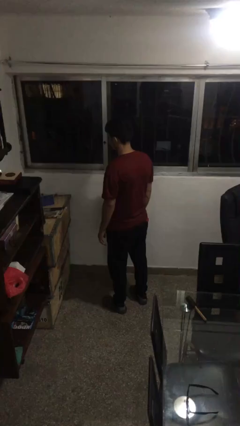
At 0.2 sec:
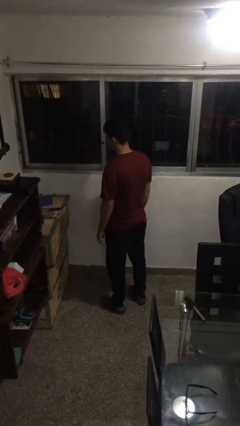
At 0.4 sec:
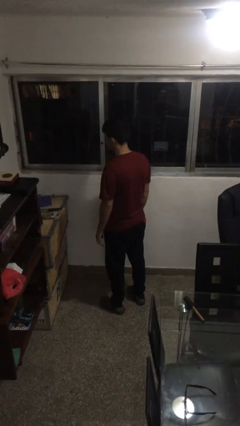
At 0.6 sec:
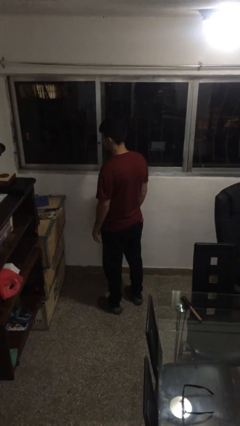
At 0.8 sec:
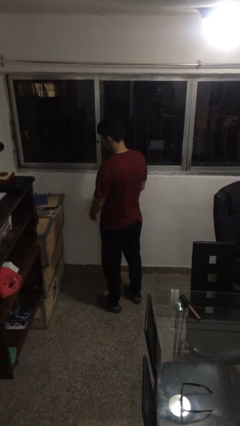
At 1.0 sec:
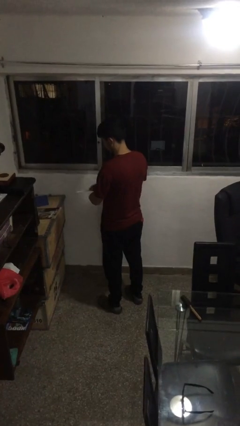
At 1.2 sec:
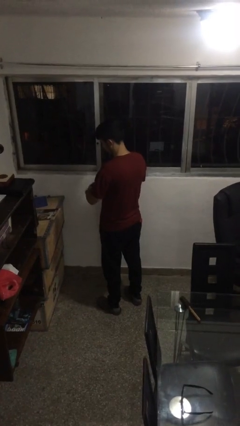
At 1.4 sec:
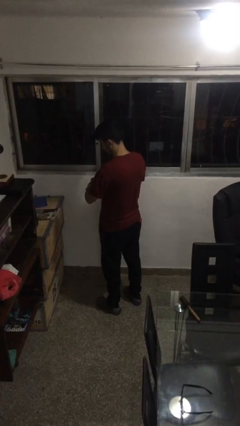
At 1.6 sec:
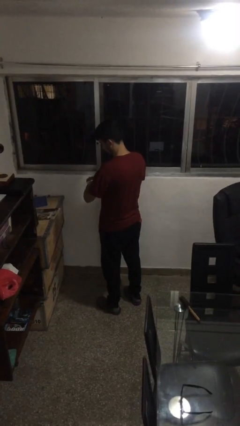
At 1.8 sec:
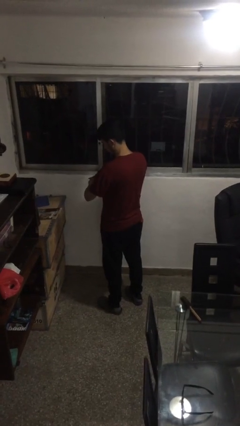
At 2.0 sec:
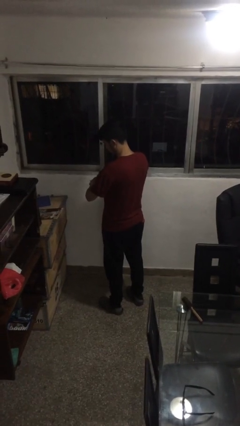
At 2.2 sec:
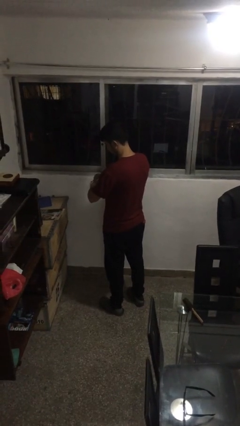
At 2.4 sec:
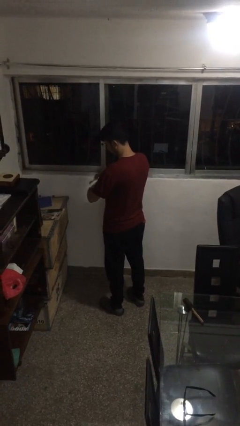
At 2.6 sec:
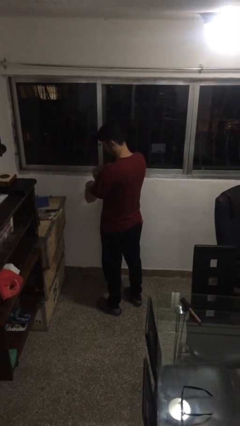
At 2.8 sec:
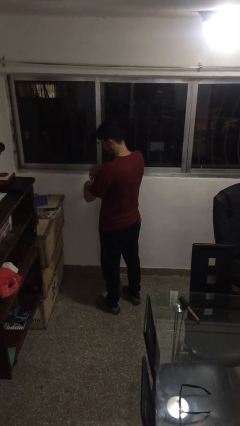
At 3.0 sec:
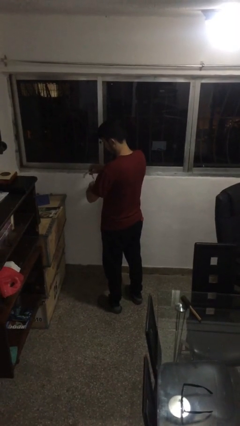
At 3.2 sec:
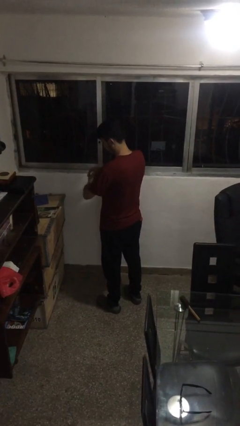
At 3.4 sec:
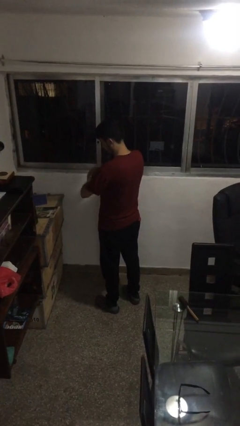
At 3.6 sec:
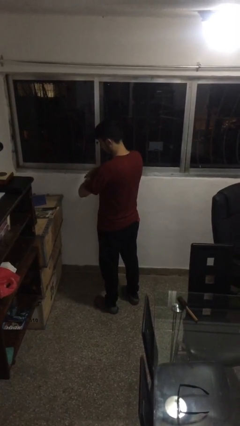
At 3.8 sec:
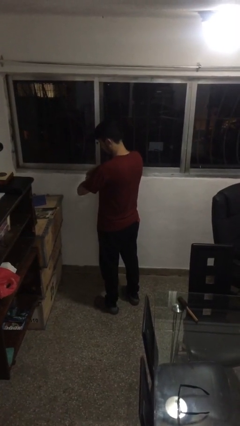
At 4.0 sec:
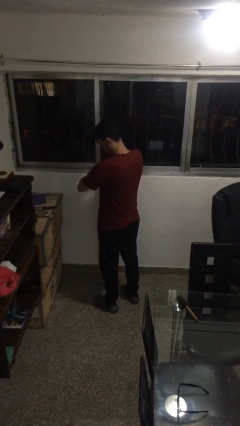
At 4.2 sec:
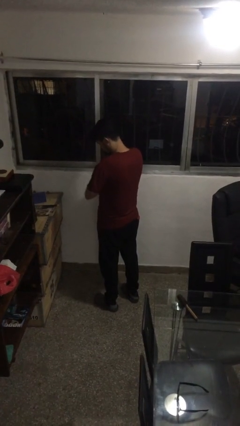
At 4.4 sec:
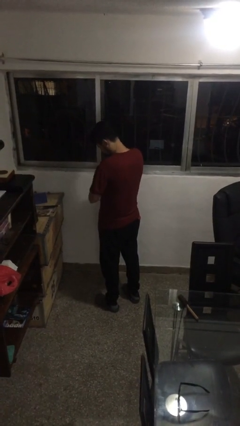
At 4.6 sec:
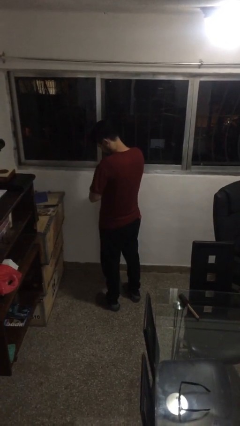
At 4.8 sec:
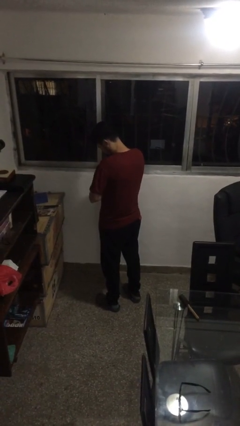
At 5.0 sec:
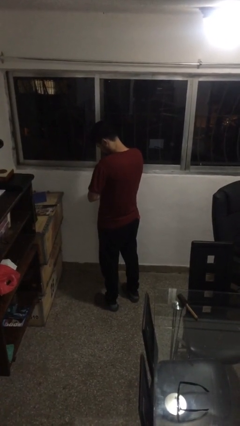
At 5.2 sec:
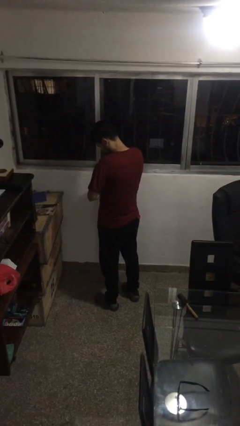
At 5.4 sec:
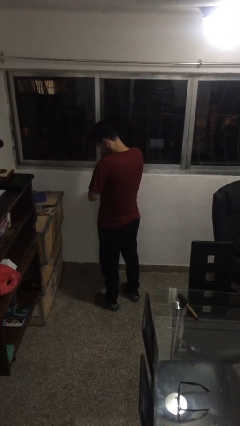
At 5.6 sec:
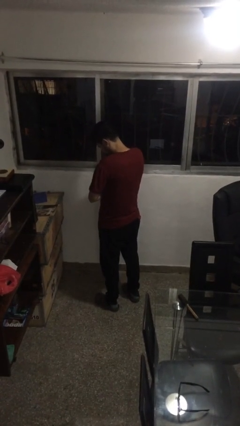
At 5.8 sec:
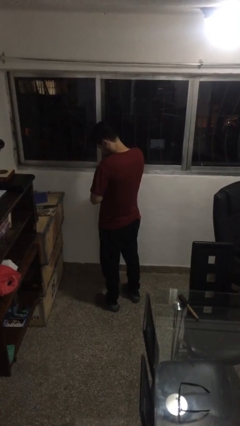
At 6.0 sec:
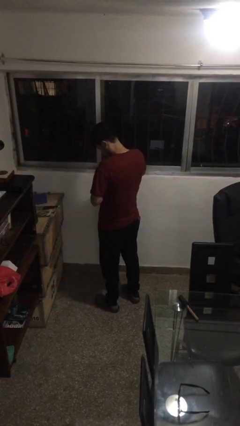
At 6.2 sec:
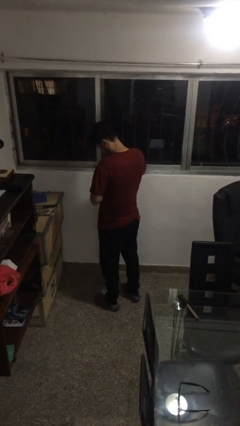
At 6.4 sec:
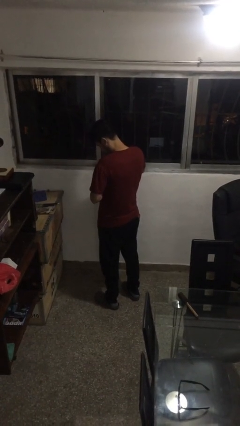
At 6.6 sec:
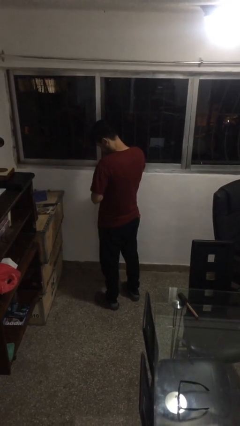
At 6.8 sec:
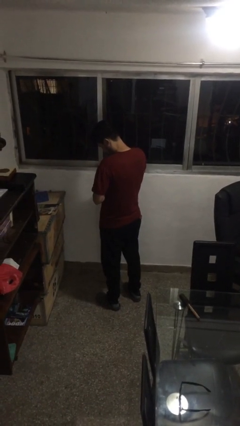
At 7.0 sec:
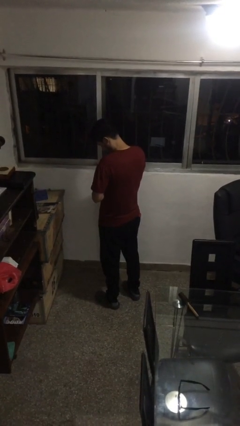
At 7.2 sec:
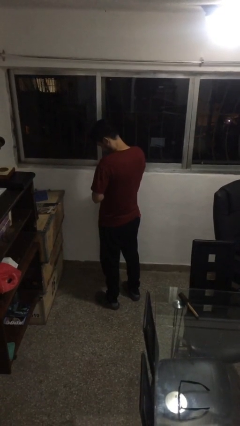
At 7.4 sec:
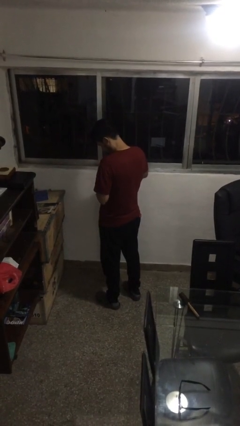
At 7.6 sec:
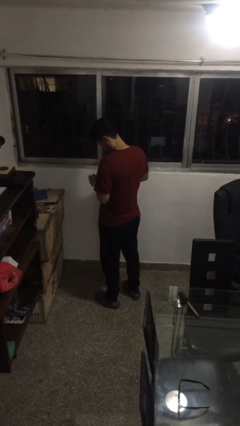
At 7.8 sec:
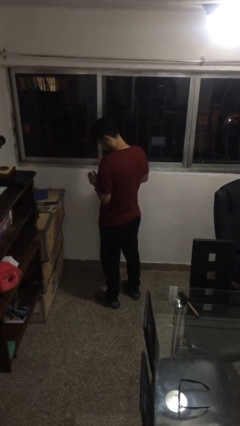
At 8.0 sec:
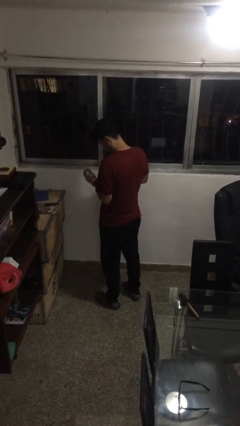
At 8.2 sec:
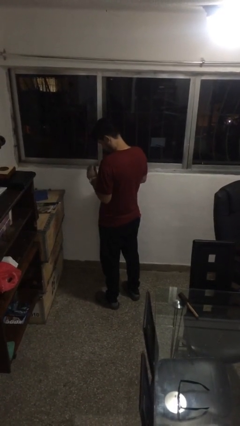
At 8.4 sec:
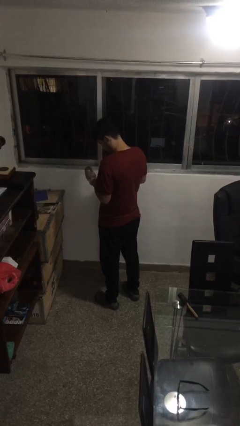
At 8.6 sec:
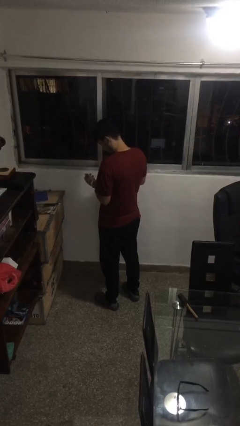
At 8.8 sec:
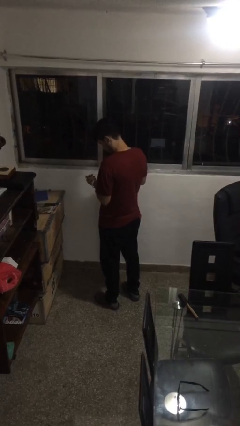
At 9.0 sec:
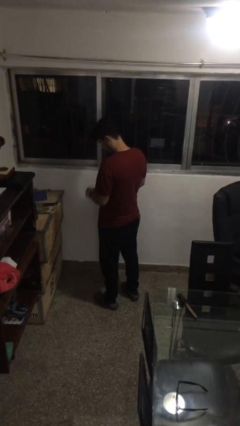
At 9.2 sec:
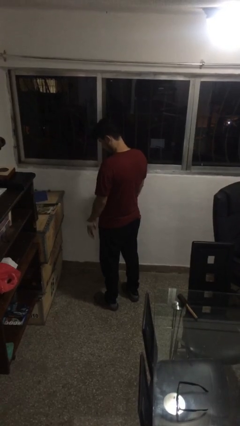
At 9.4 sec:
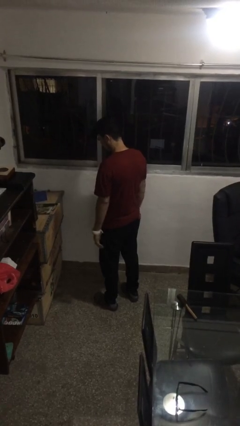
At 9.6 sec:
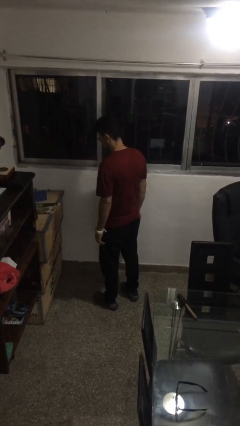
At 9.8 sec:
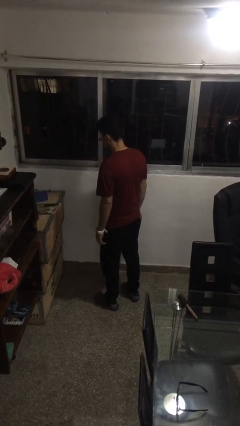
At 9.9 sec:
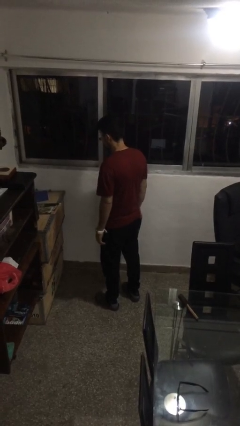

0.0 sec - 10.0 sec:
person puts on wristwatch

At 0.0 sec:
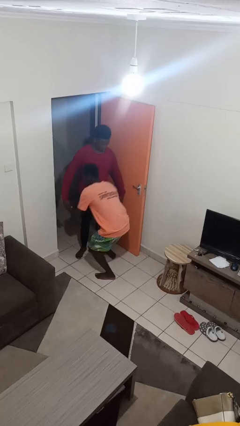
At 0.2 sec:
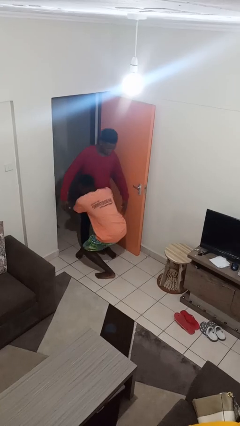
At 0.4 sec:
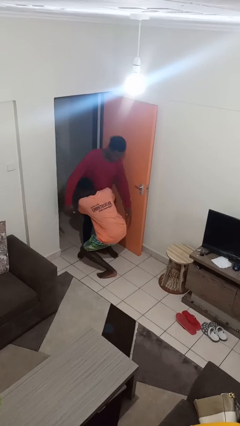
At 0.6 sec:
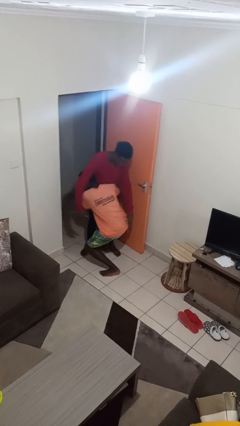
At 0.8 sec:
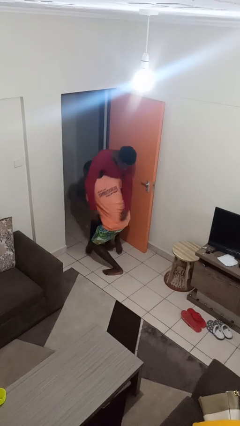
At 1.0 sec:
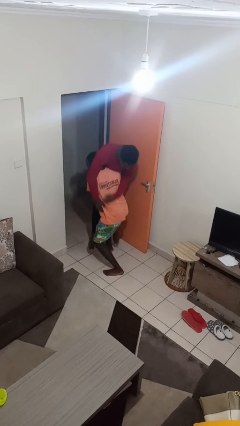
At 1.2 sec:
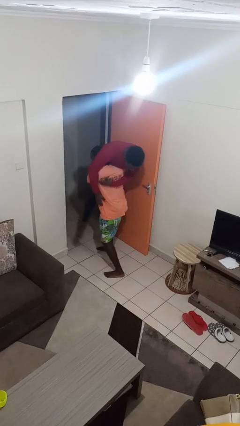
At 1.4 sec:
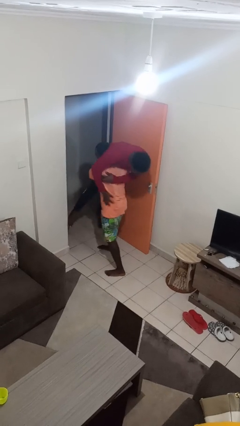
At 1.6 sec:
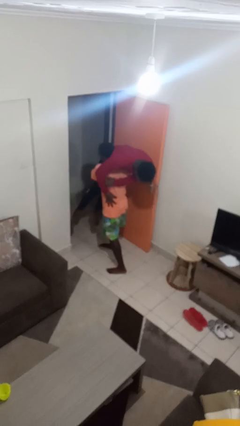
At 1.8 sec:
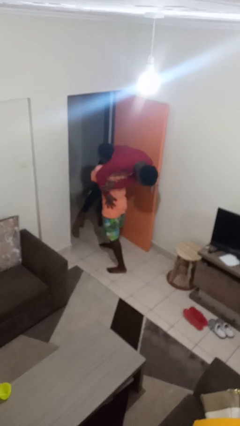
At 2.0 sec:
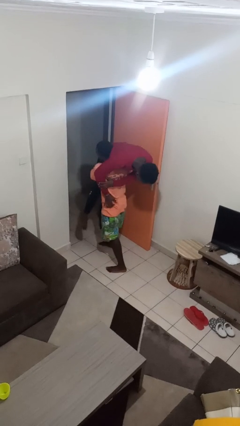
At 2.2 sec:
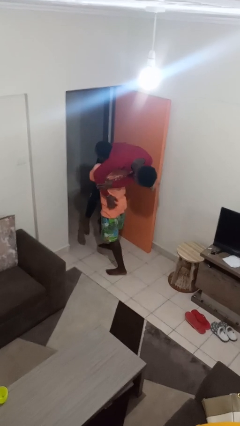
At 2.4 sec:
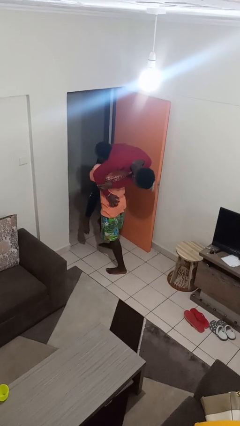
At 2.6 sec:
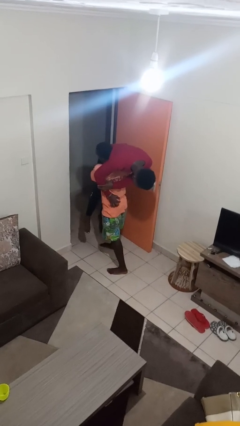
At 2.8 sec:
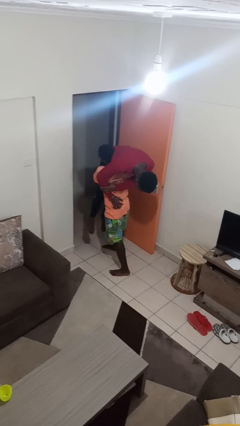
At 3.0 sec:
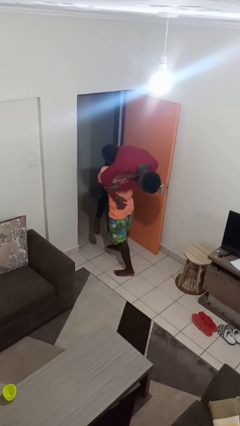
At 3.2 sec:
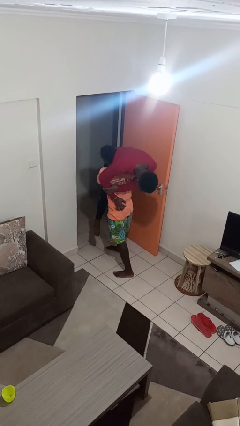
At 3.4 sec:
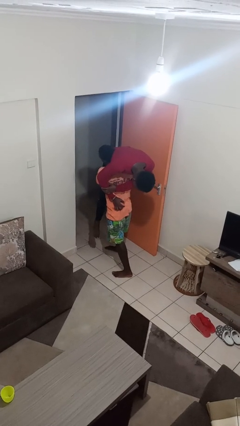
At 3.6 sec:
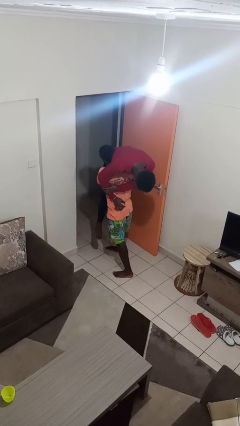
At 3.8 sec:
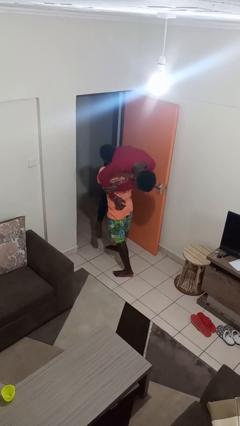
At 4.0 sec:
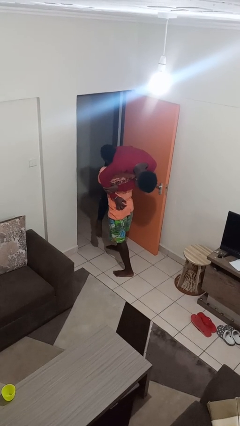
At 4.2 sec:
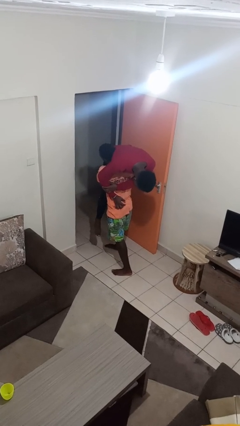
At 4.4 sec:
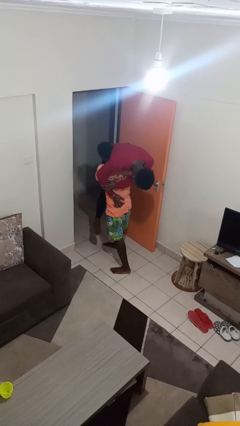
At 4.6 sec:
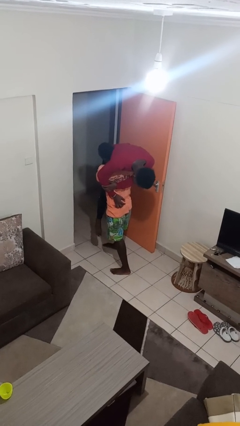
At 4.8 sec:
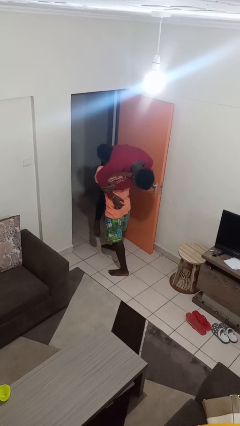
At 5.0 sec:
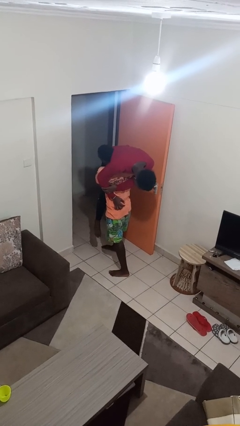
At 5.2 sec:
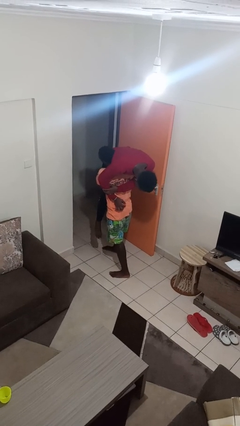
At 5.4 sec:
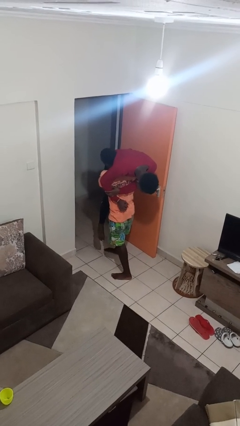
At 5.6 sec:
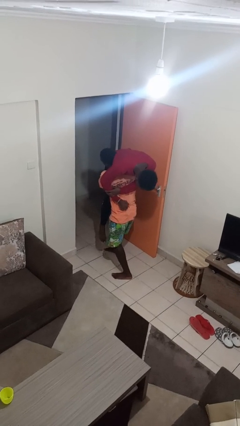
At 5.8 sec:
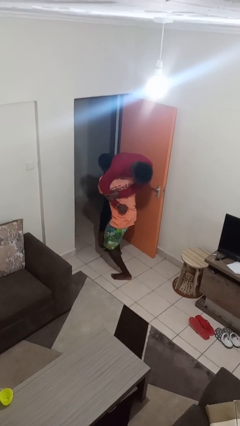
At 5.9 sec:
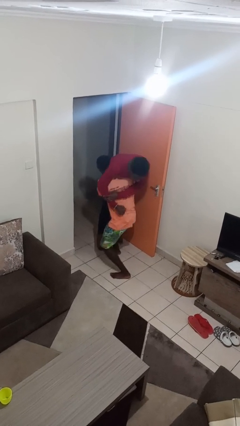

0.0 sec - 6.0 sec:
person carries person over shoulder

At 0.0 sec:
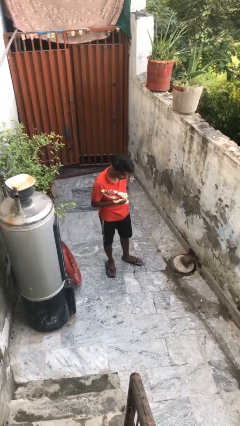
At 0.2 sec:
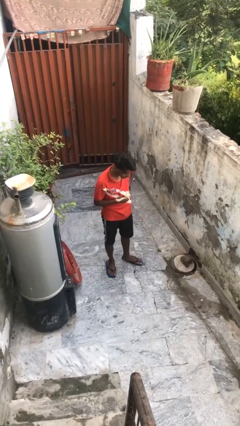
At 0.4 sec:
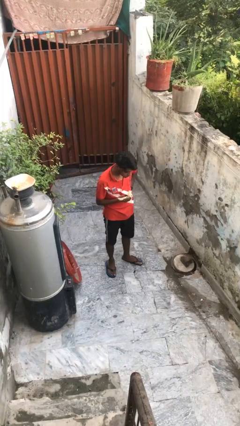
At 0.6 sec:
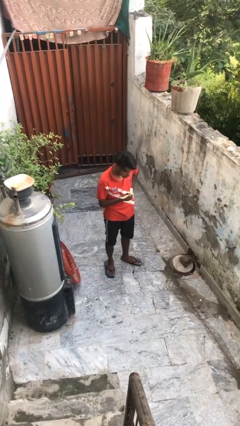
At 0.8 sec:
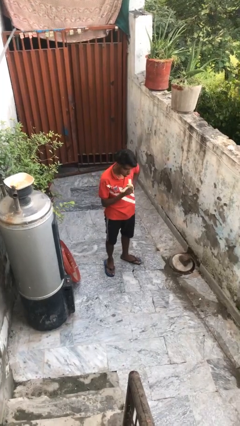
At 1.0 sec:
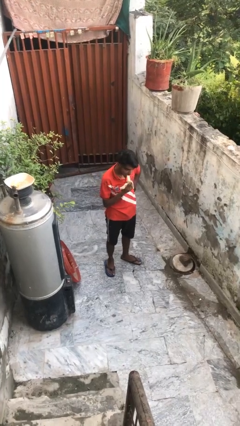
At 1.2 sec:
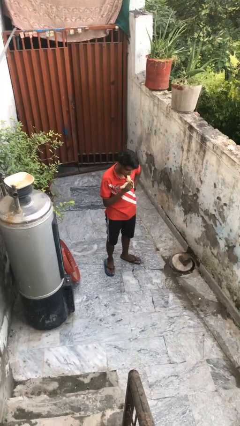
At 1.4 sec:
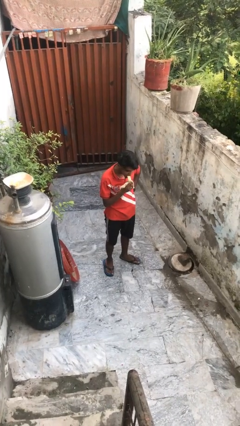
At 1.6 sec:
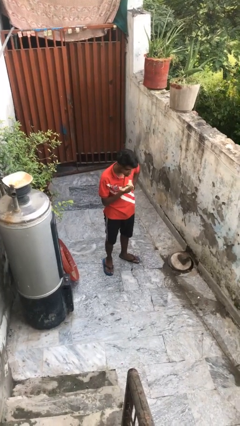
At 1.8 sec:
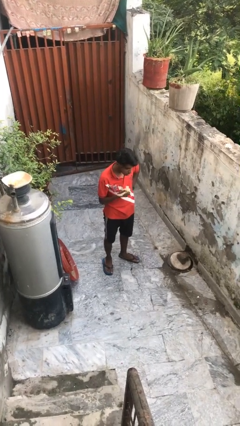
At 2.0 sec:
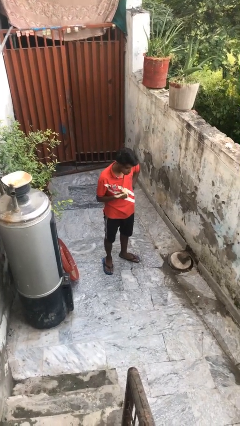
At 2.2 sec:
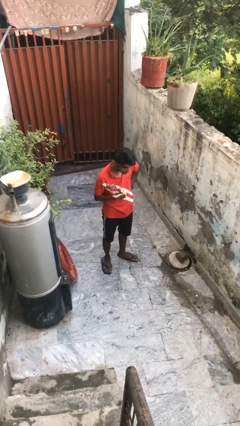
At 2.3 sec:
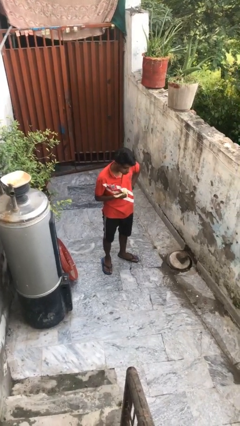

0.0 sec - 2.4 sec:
person eats banana
